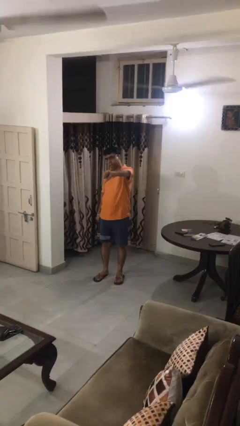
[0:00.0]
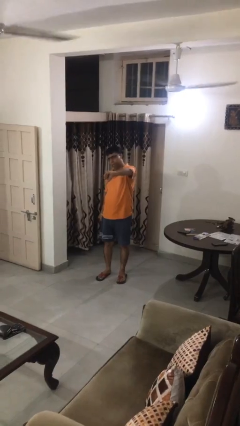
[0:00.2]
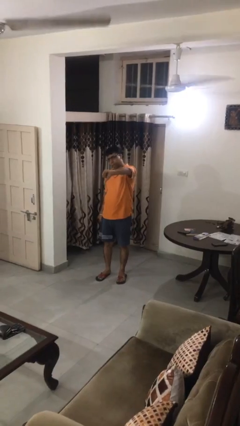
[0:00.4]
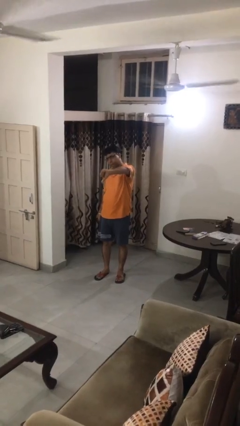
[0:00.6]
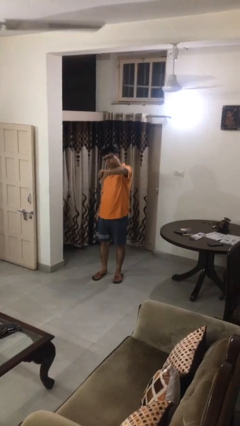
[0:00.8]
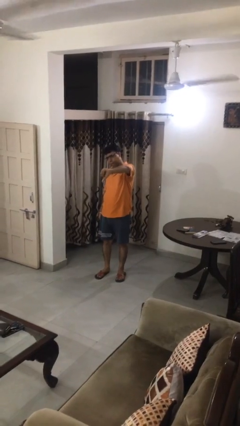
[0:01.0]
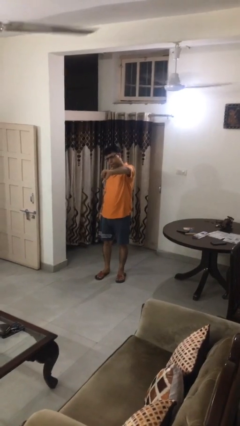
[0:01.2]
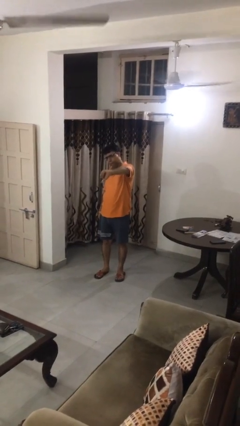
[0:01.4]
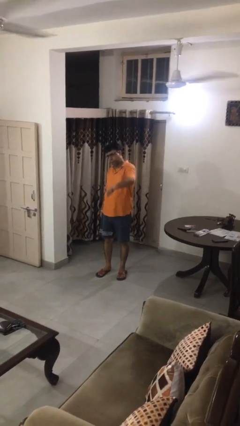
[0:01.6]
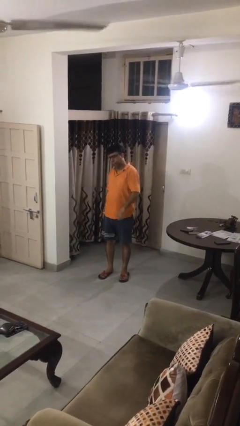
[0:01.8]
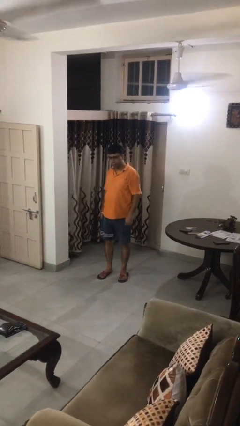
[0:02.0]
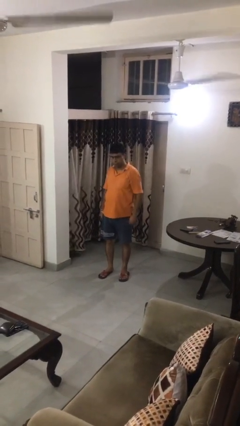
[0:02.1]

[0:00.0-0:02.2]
person gestures thumbs down

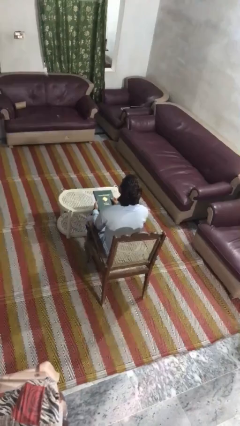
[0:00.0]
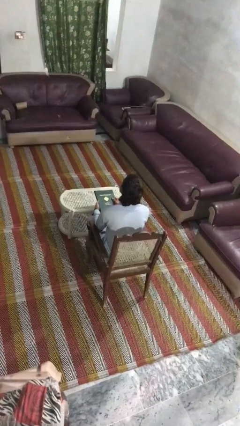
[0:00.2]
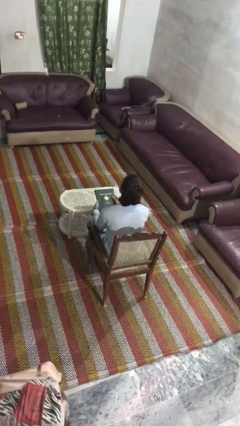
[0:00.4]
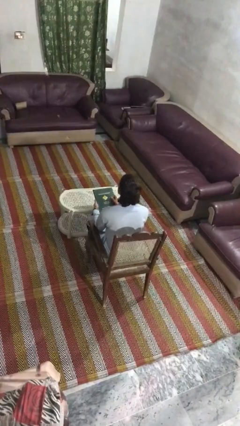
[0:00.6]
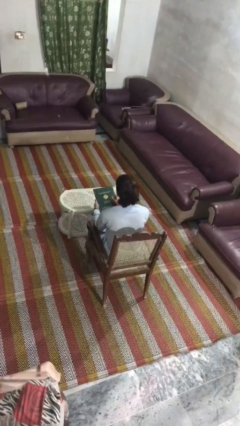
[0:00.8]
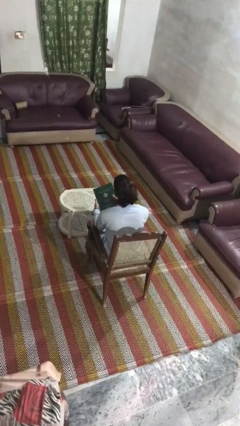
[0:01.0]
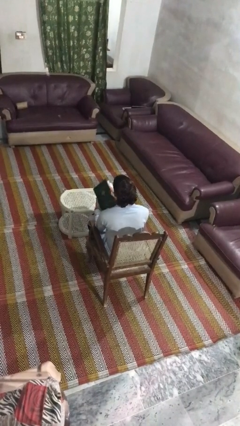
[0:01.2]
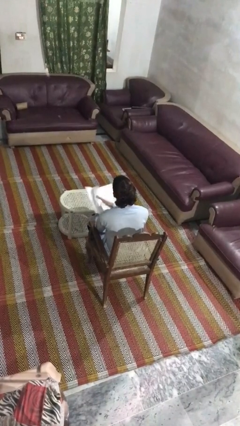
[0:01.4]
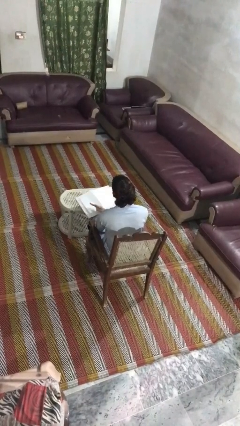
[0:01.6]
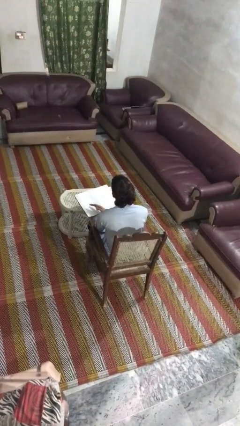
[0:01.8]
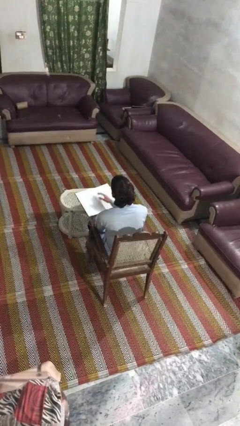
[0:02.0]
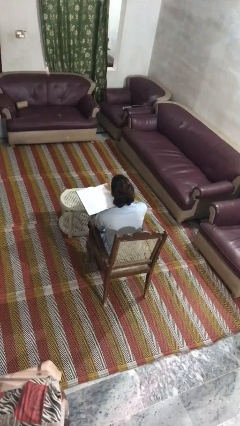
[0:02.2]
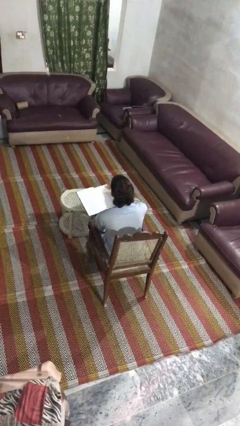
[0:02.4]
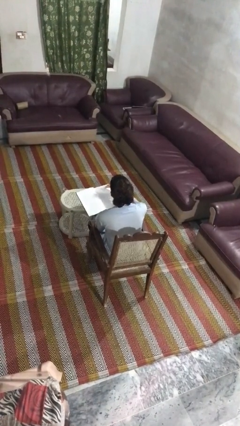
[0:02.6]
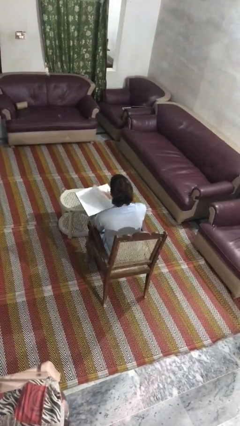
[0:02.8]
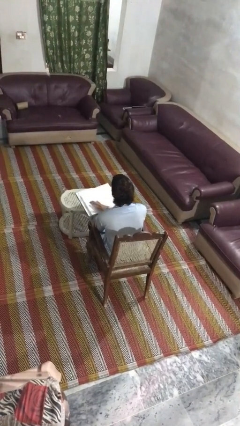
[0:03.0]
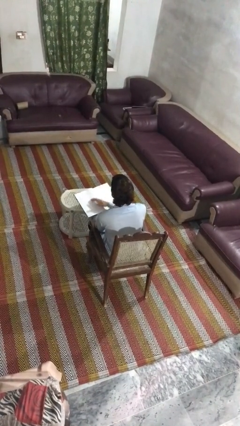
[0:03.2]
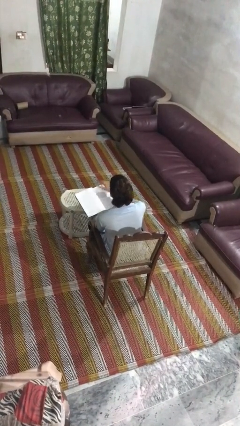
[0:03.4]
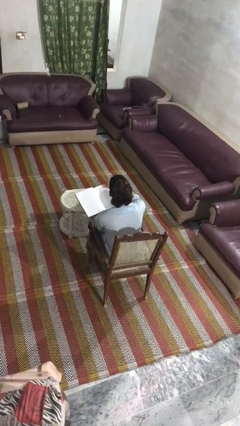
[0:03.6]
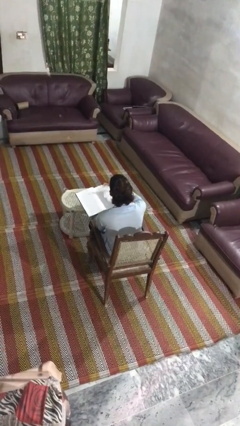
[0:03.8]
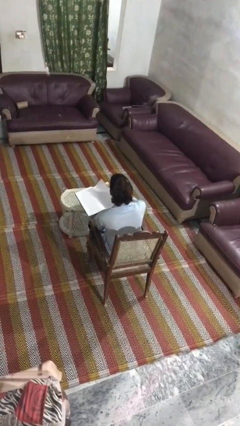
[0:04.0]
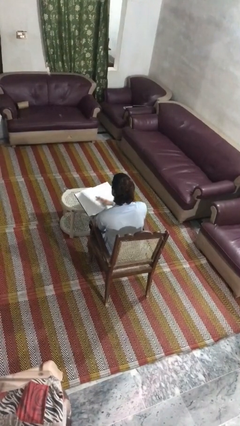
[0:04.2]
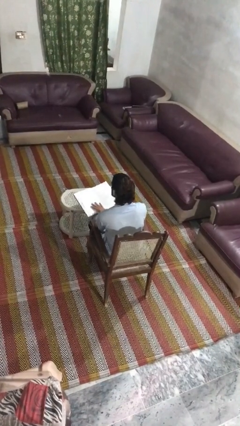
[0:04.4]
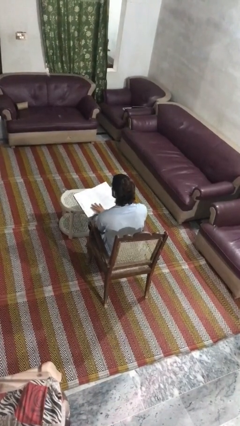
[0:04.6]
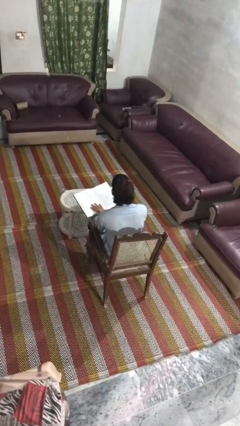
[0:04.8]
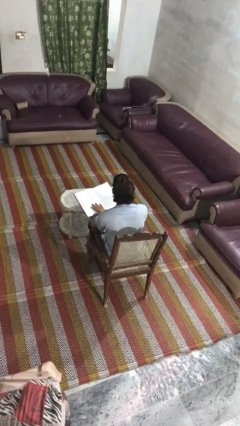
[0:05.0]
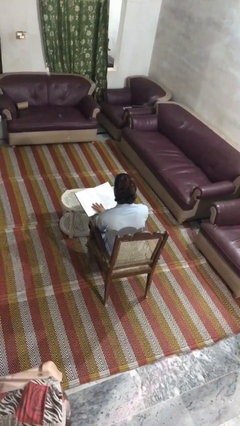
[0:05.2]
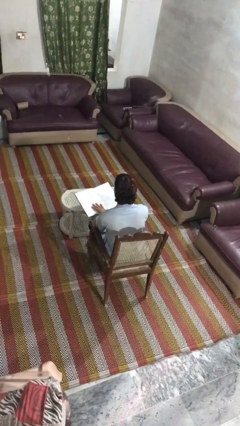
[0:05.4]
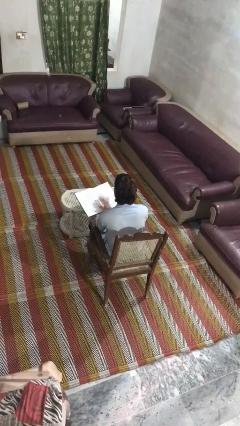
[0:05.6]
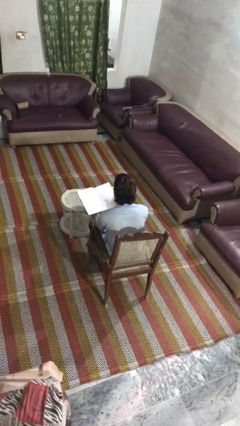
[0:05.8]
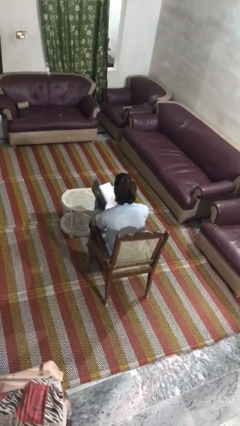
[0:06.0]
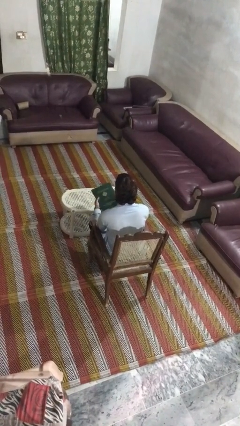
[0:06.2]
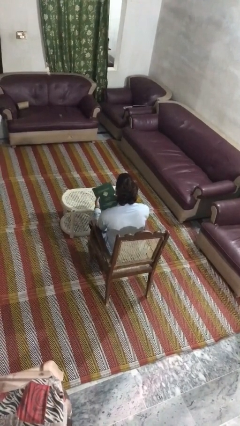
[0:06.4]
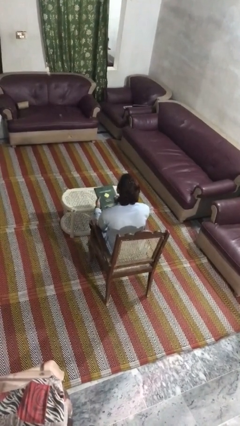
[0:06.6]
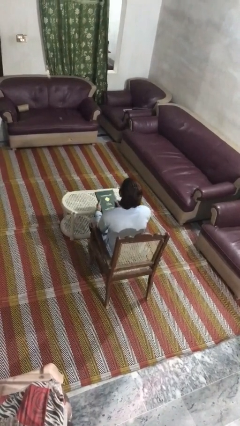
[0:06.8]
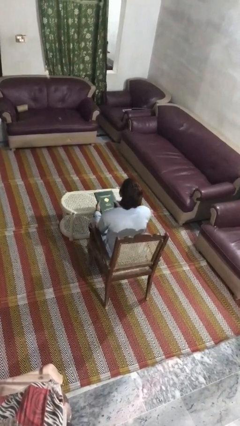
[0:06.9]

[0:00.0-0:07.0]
person reads book

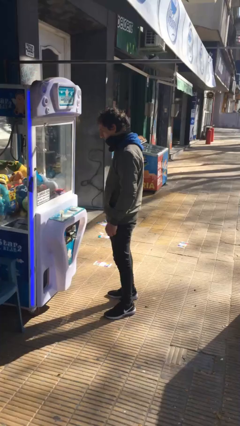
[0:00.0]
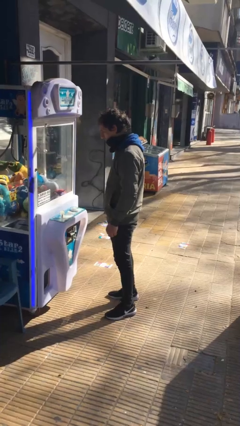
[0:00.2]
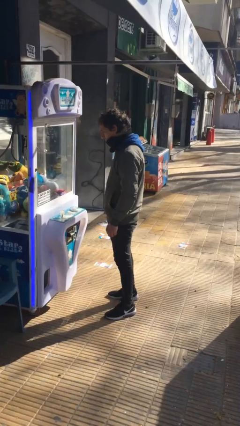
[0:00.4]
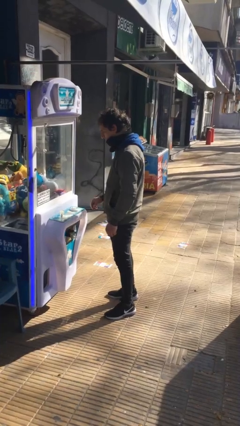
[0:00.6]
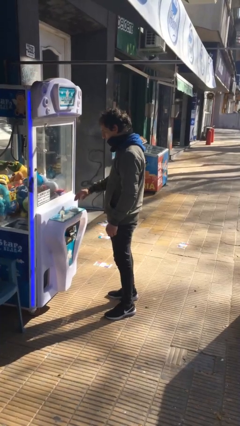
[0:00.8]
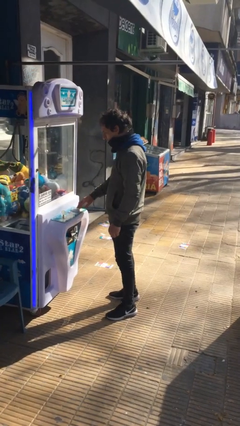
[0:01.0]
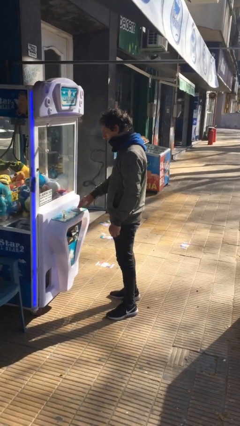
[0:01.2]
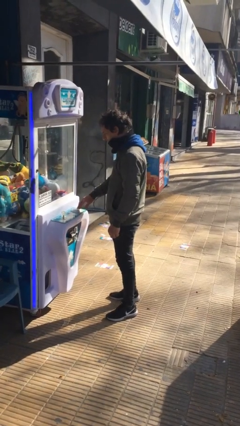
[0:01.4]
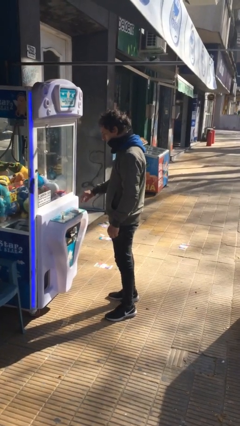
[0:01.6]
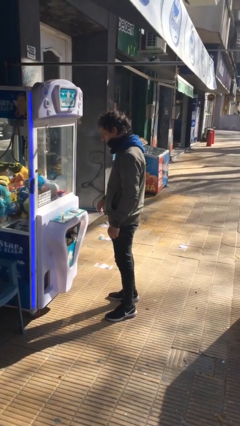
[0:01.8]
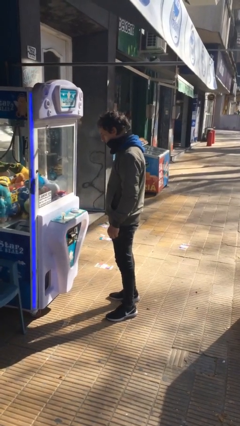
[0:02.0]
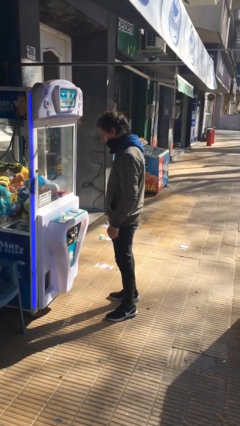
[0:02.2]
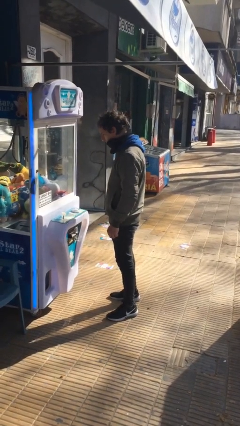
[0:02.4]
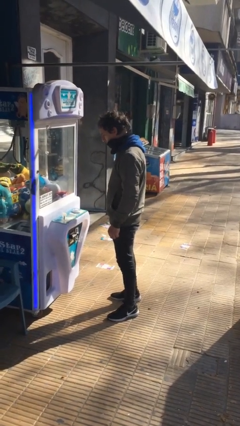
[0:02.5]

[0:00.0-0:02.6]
person purchases from machine

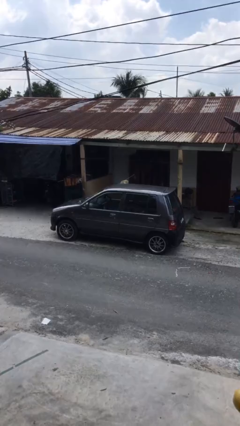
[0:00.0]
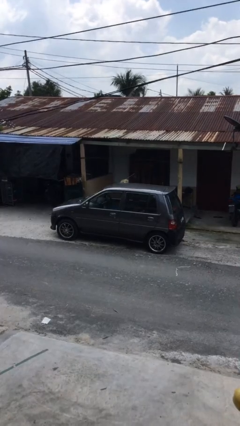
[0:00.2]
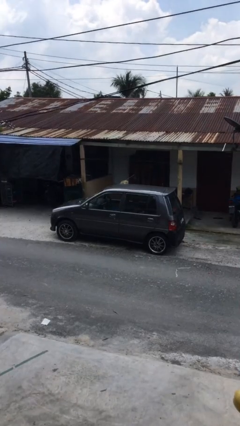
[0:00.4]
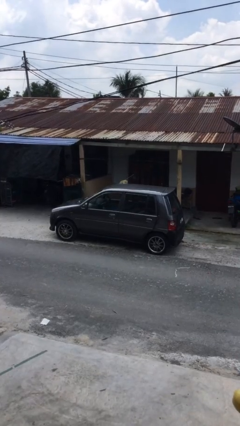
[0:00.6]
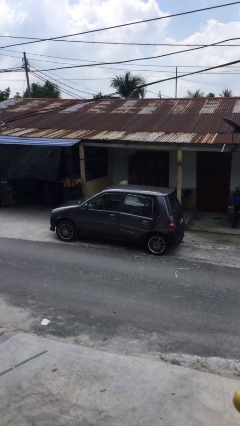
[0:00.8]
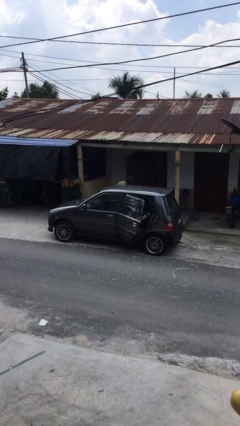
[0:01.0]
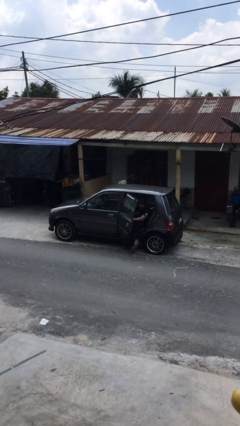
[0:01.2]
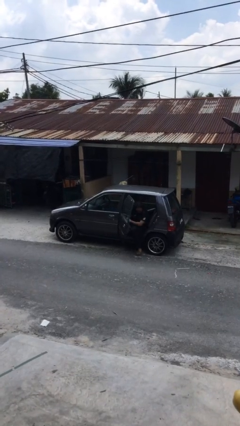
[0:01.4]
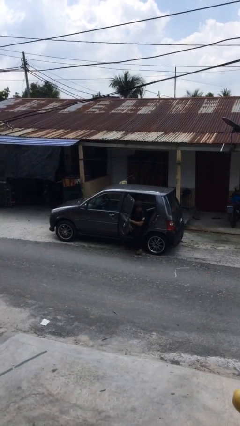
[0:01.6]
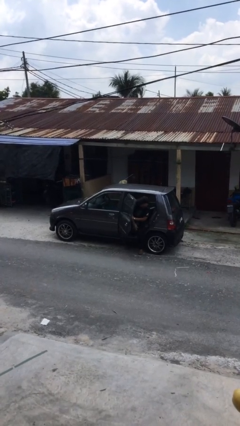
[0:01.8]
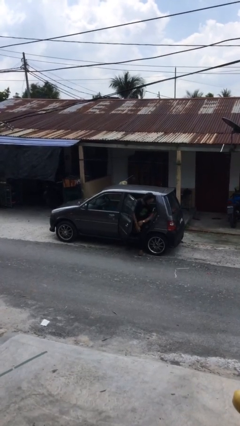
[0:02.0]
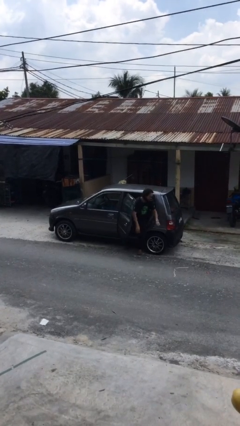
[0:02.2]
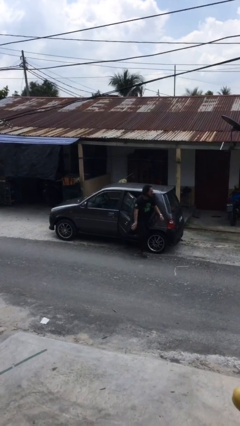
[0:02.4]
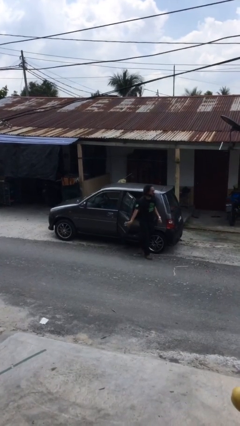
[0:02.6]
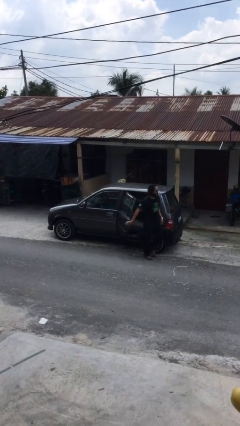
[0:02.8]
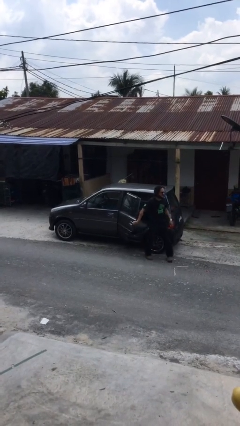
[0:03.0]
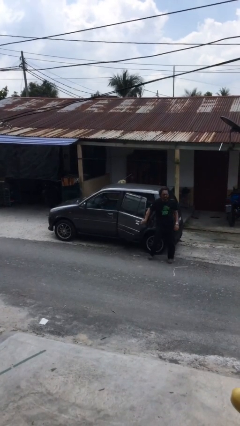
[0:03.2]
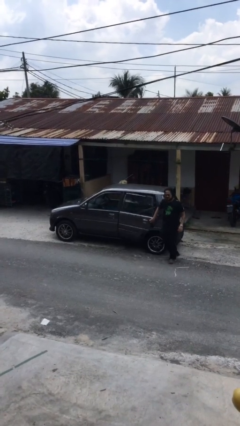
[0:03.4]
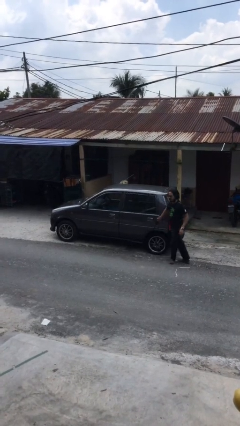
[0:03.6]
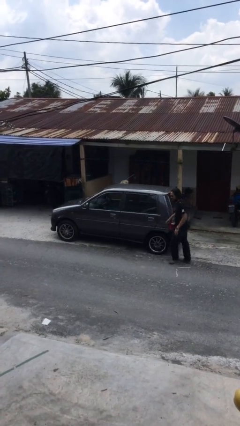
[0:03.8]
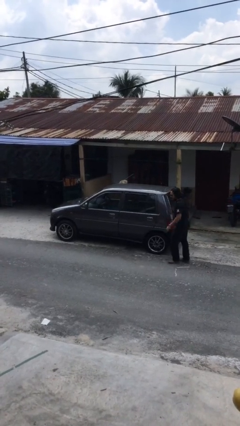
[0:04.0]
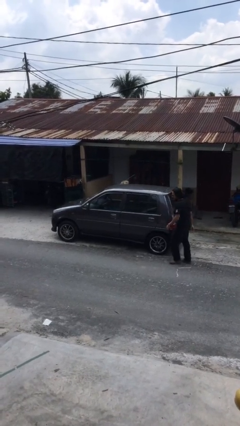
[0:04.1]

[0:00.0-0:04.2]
car drops off person

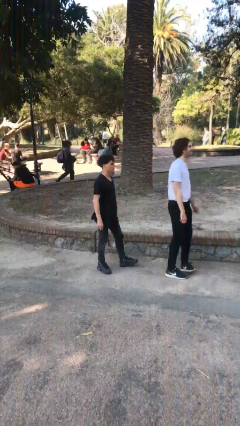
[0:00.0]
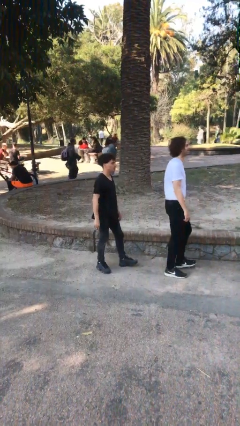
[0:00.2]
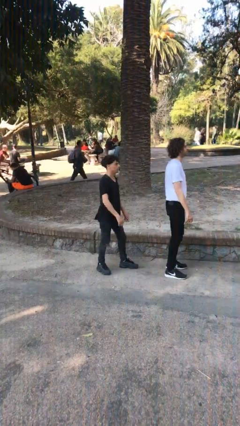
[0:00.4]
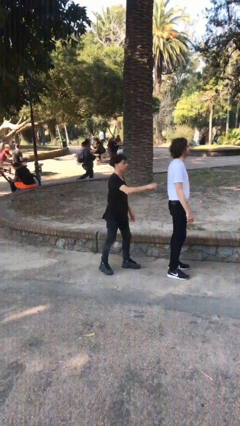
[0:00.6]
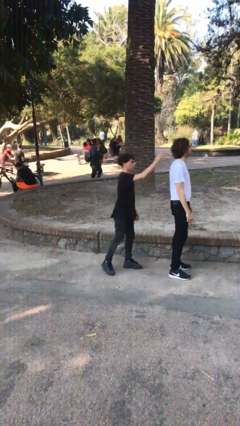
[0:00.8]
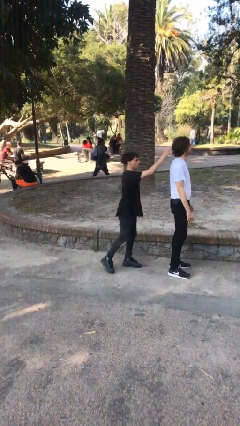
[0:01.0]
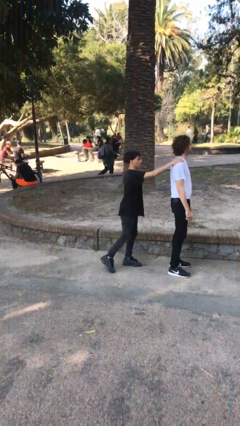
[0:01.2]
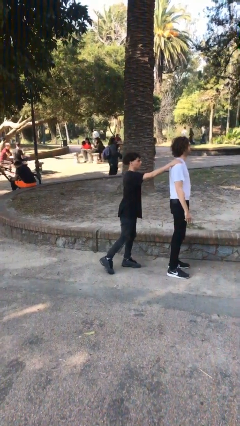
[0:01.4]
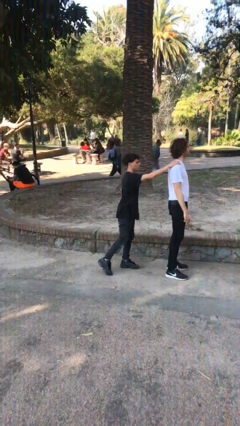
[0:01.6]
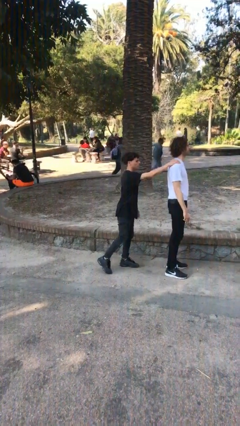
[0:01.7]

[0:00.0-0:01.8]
person grabs person by shoulder
